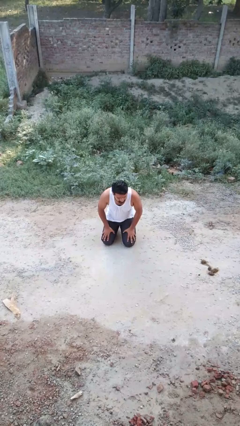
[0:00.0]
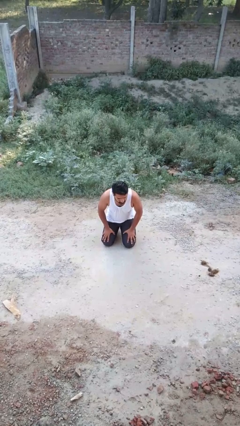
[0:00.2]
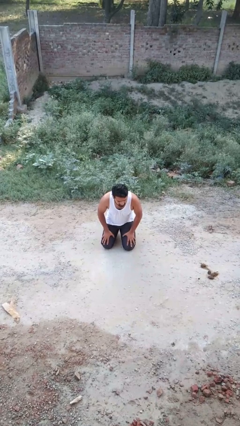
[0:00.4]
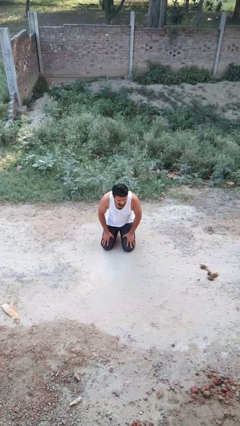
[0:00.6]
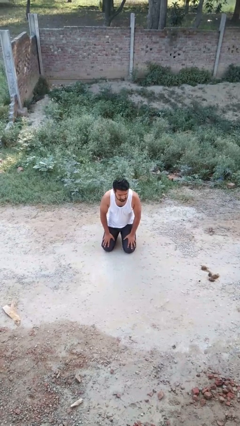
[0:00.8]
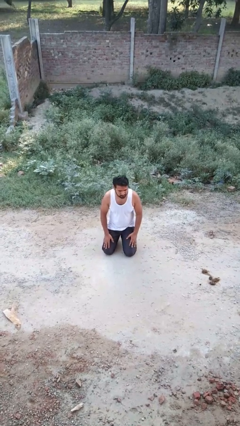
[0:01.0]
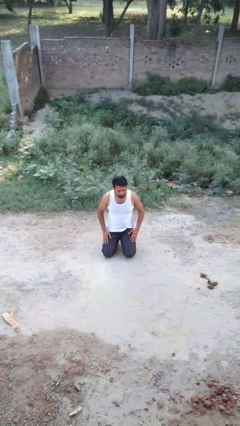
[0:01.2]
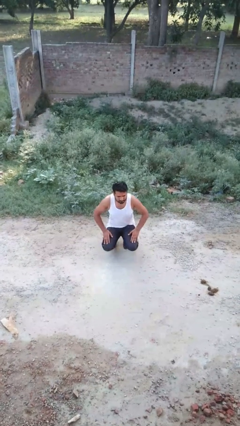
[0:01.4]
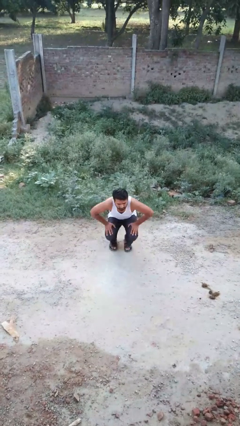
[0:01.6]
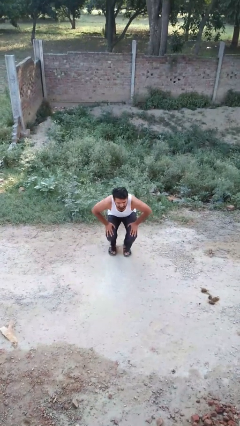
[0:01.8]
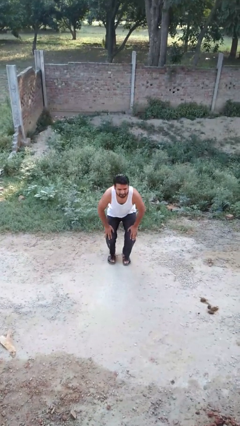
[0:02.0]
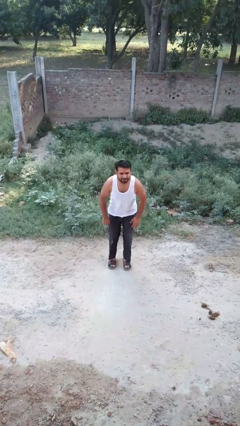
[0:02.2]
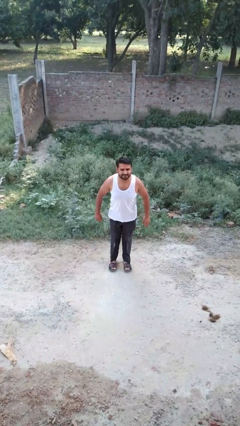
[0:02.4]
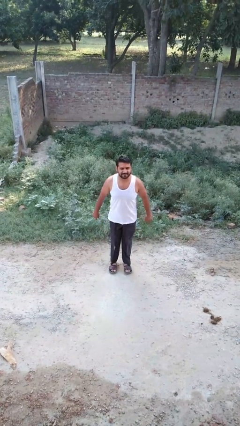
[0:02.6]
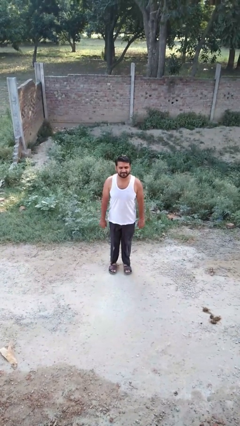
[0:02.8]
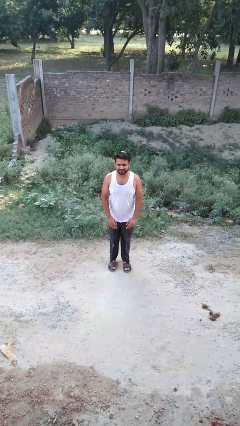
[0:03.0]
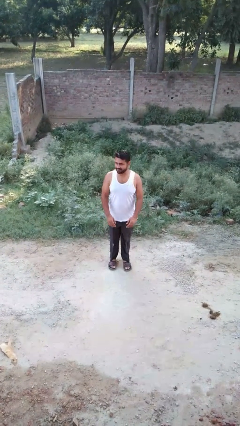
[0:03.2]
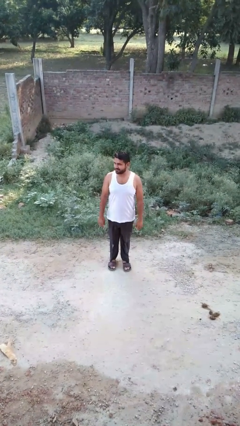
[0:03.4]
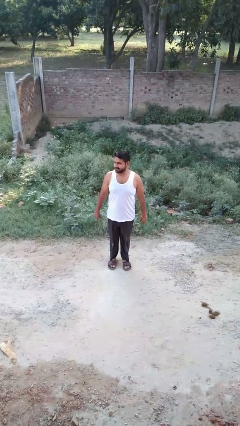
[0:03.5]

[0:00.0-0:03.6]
person stands up from floor

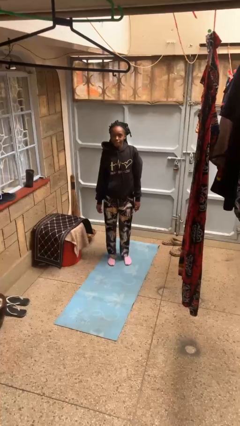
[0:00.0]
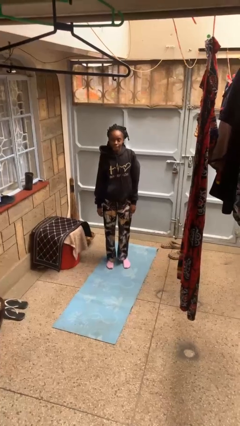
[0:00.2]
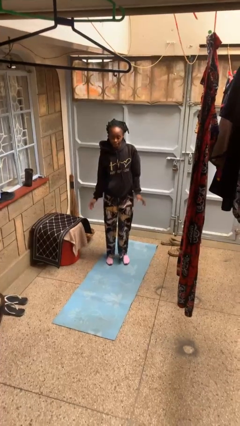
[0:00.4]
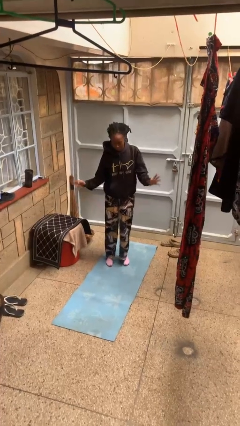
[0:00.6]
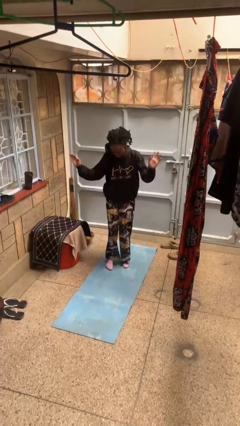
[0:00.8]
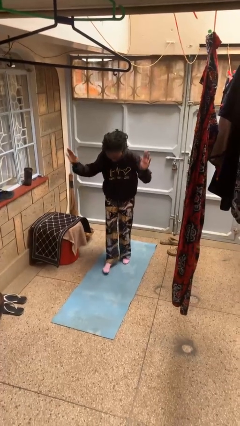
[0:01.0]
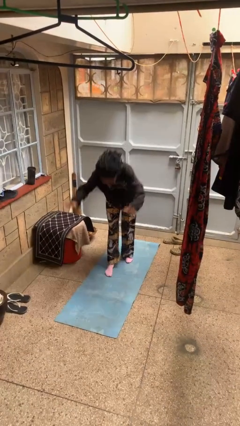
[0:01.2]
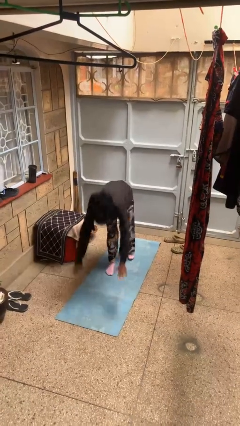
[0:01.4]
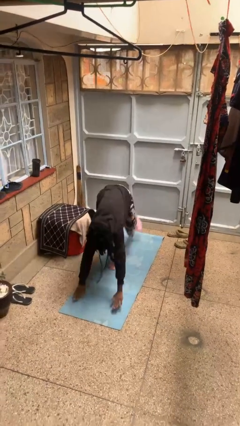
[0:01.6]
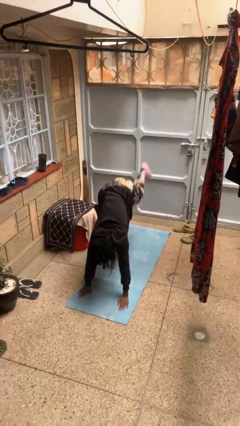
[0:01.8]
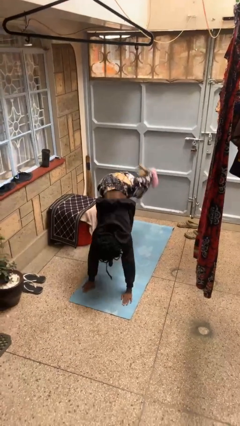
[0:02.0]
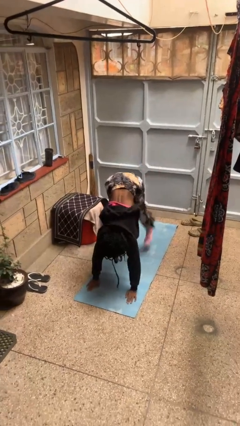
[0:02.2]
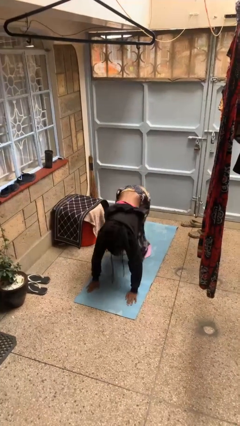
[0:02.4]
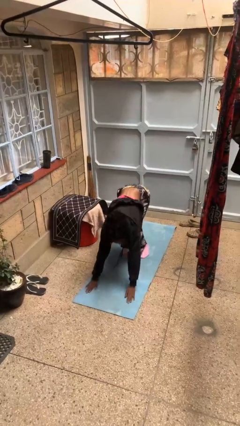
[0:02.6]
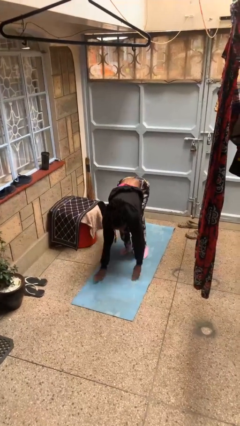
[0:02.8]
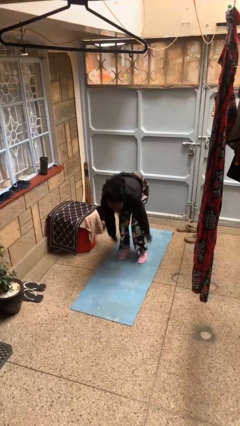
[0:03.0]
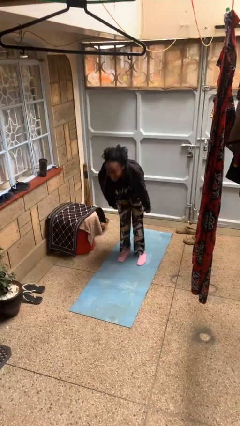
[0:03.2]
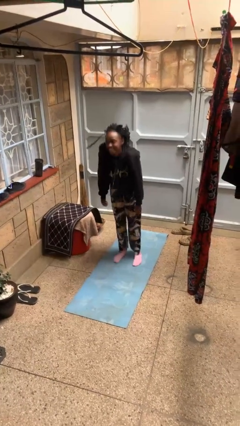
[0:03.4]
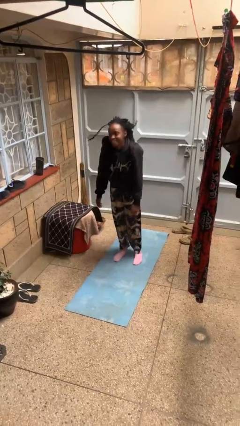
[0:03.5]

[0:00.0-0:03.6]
person handstand

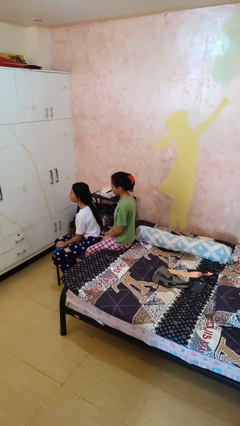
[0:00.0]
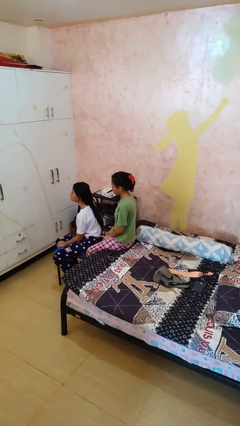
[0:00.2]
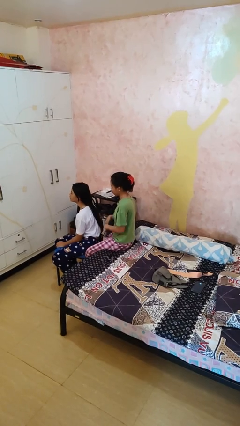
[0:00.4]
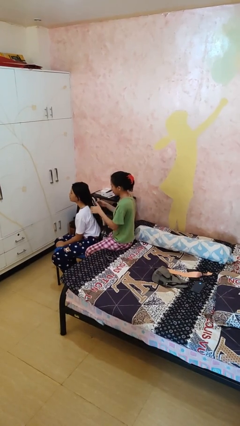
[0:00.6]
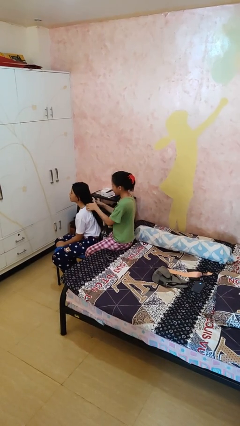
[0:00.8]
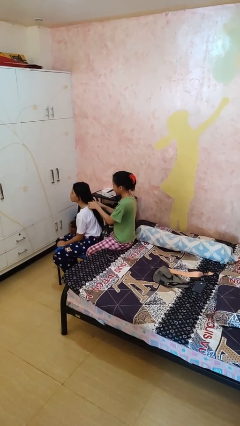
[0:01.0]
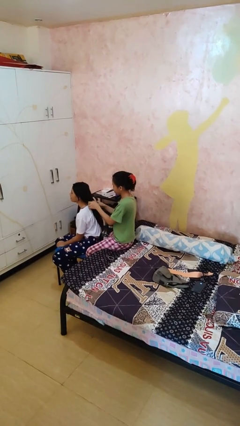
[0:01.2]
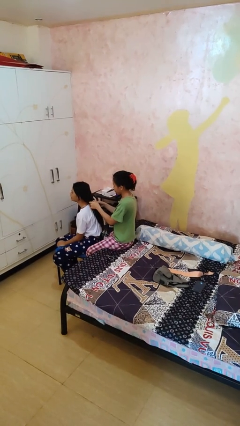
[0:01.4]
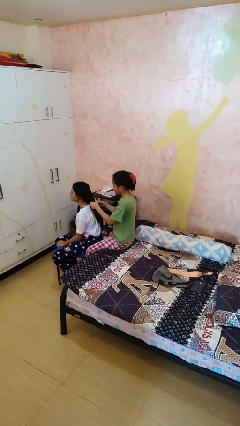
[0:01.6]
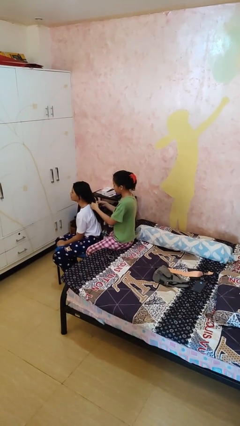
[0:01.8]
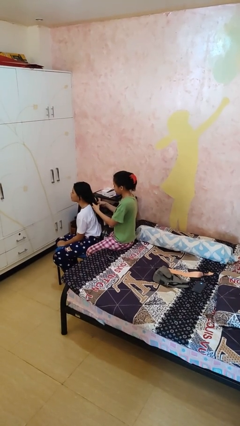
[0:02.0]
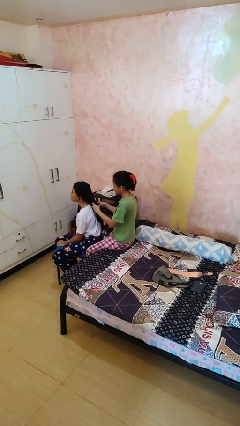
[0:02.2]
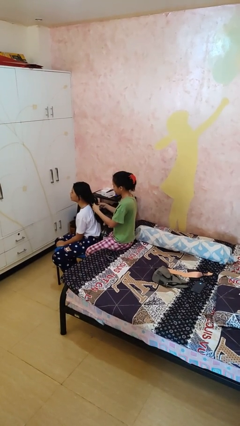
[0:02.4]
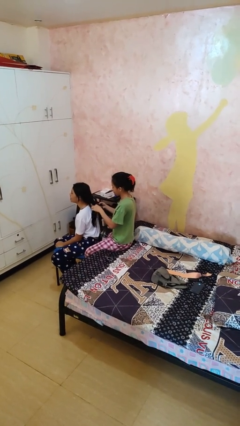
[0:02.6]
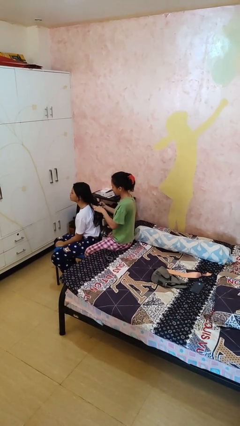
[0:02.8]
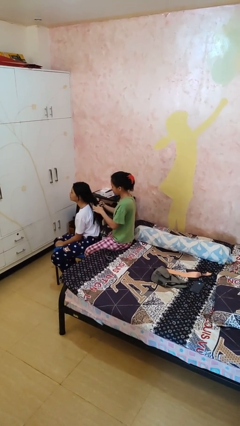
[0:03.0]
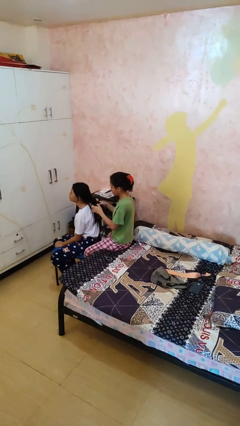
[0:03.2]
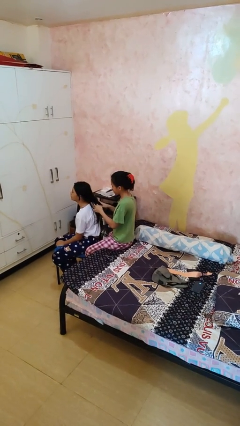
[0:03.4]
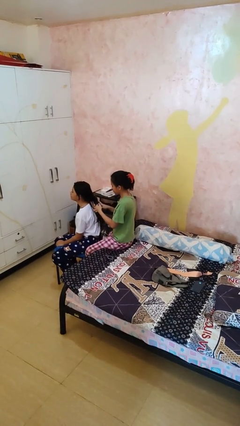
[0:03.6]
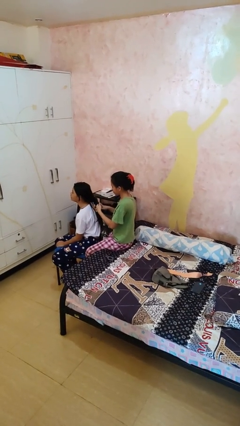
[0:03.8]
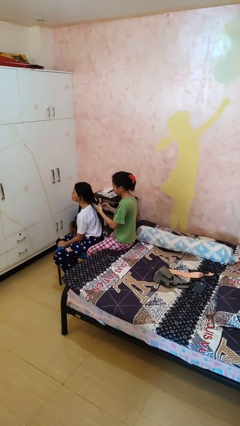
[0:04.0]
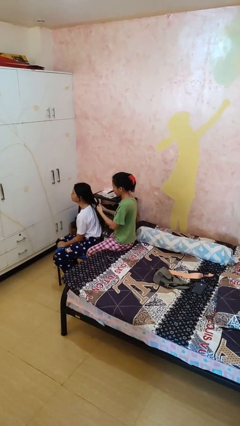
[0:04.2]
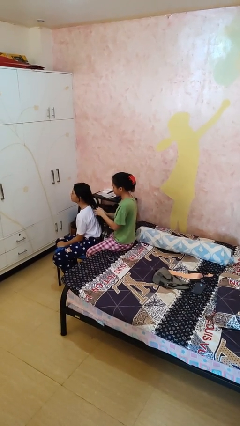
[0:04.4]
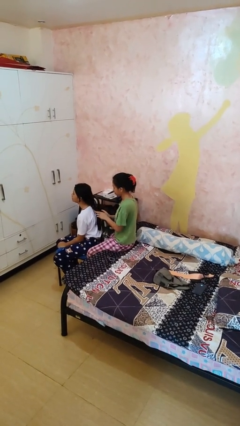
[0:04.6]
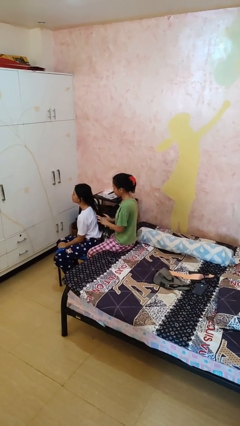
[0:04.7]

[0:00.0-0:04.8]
person braids hair of person

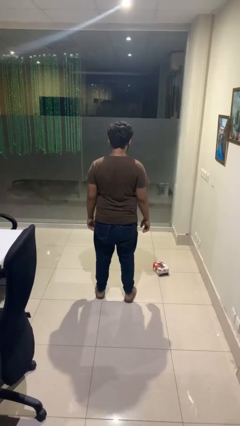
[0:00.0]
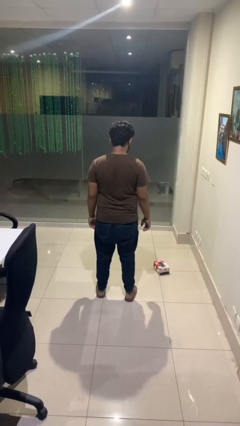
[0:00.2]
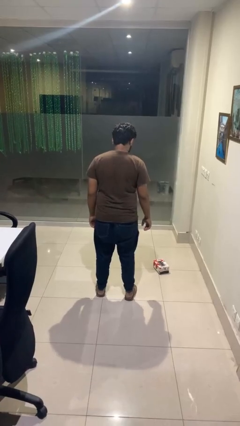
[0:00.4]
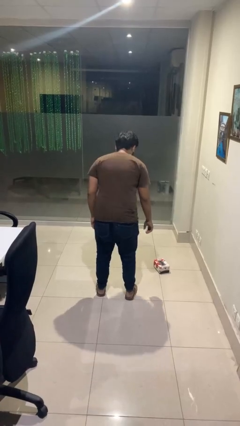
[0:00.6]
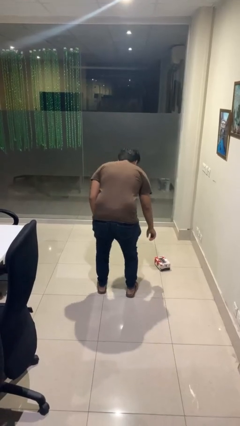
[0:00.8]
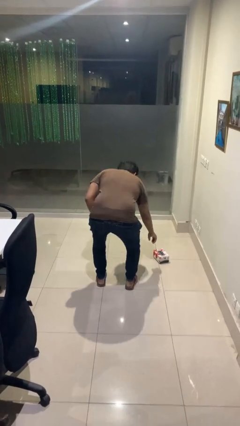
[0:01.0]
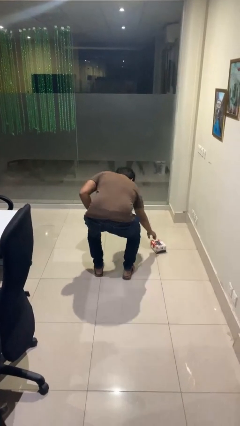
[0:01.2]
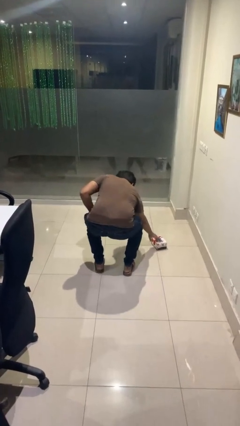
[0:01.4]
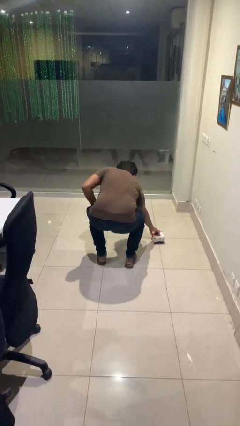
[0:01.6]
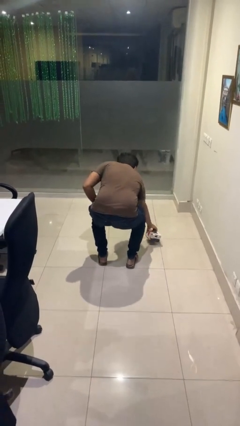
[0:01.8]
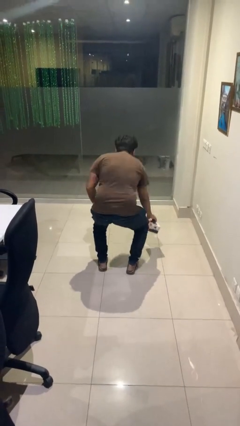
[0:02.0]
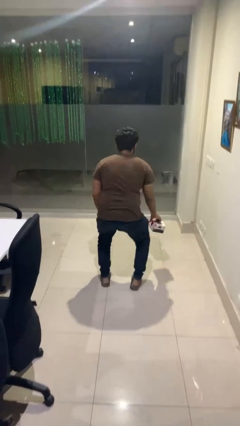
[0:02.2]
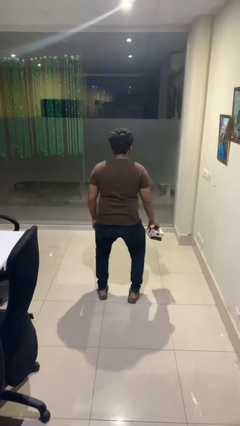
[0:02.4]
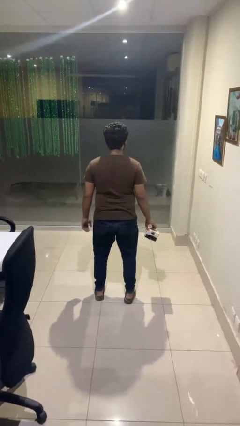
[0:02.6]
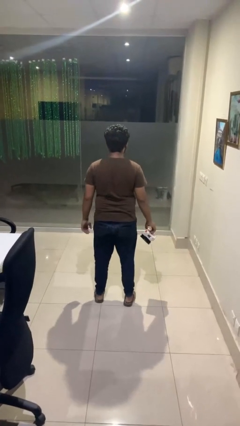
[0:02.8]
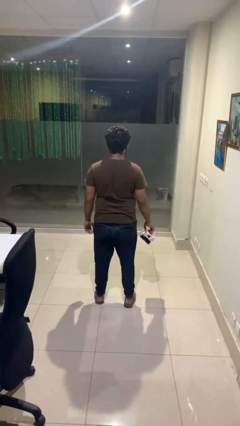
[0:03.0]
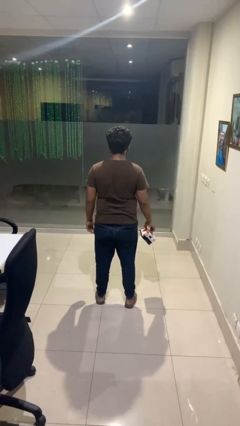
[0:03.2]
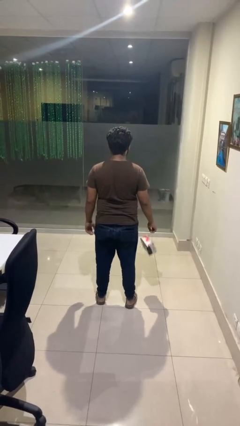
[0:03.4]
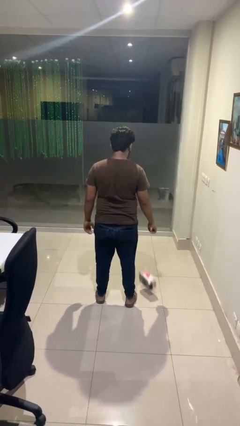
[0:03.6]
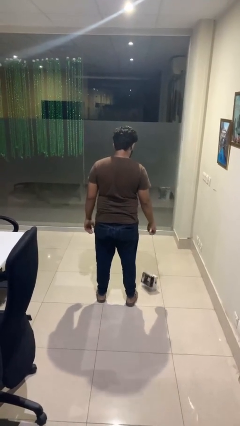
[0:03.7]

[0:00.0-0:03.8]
person picks up object from floor

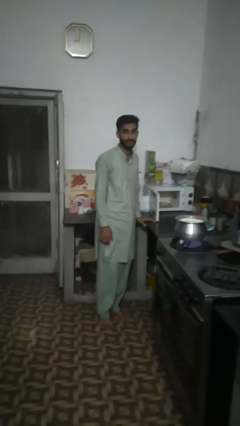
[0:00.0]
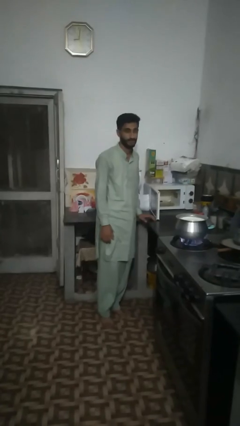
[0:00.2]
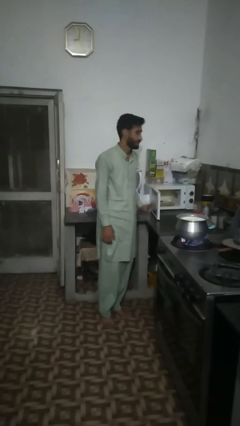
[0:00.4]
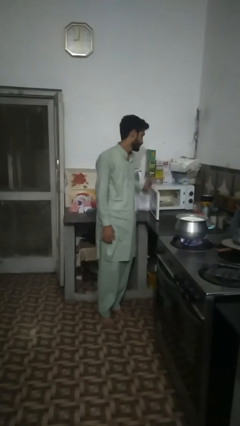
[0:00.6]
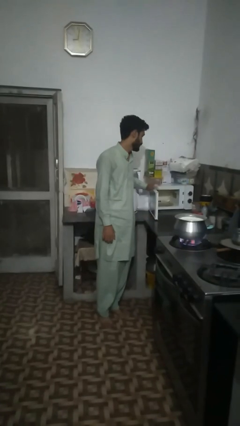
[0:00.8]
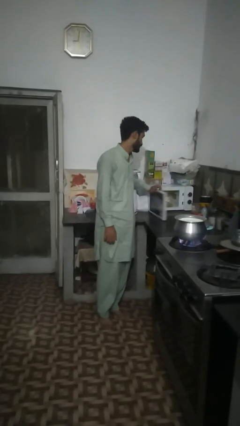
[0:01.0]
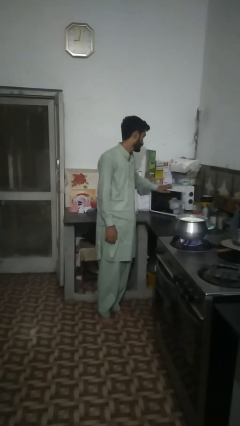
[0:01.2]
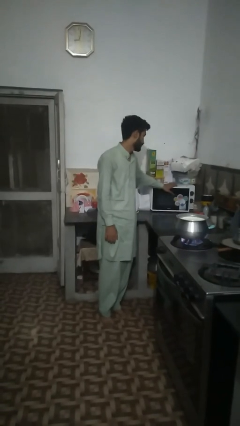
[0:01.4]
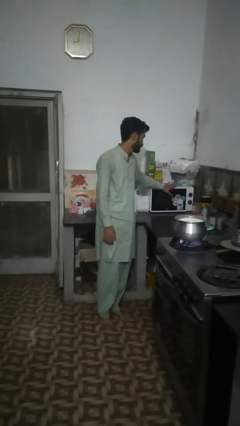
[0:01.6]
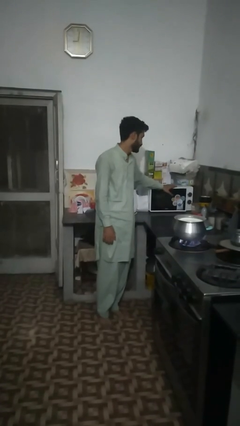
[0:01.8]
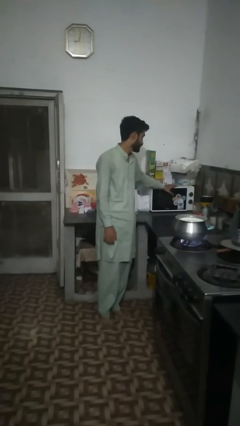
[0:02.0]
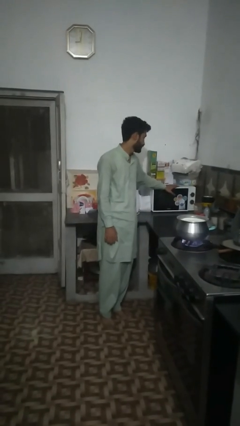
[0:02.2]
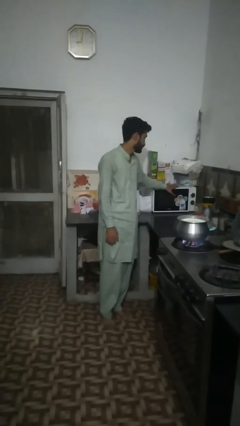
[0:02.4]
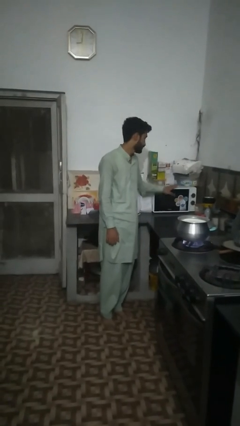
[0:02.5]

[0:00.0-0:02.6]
person closes microwave
